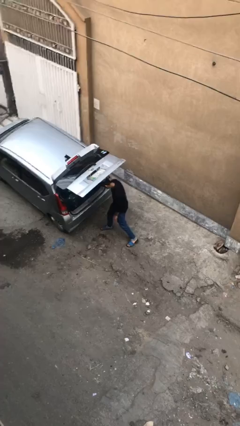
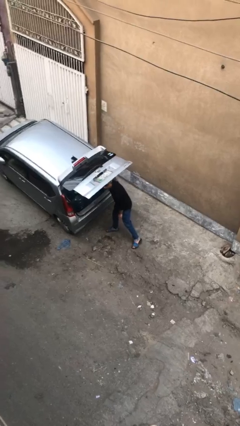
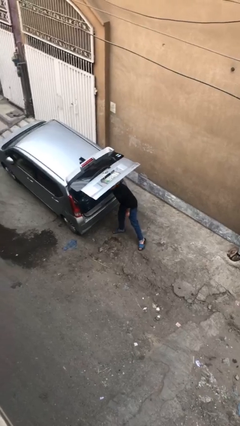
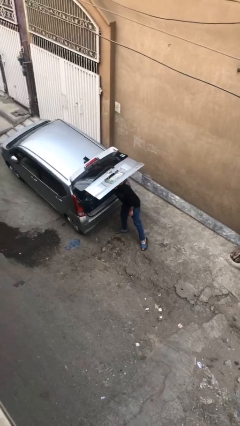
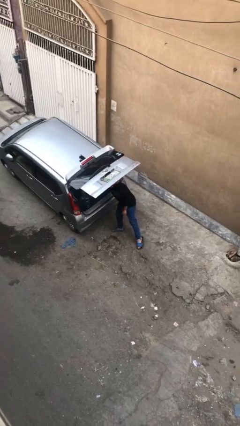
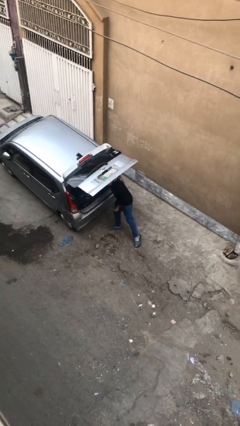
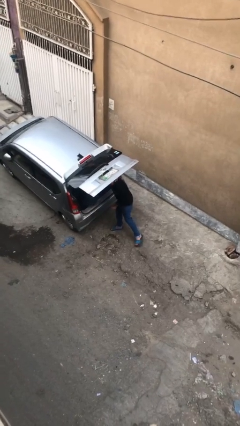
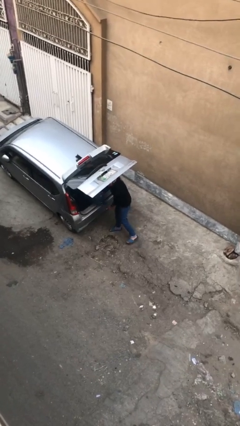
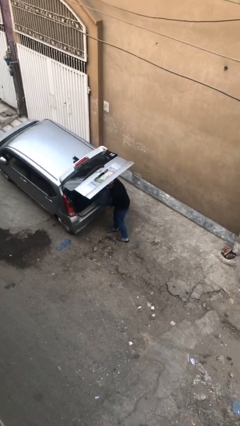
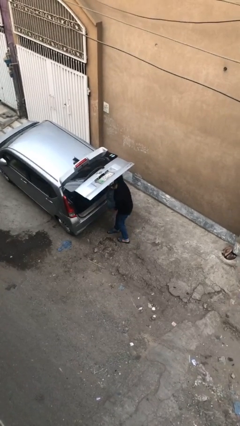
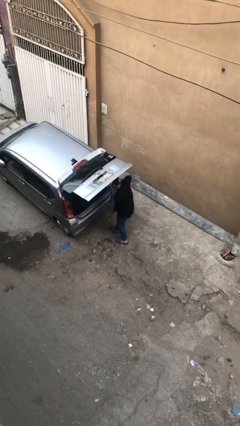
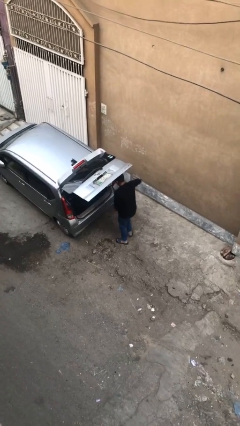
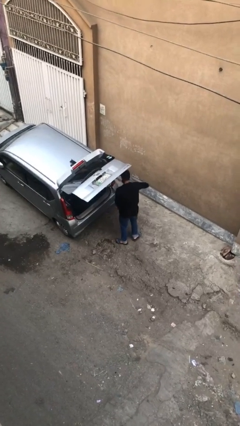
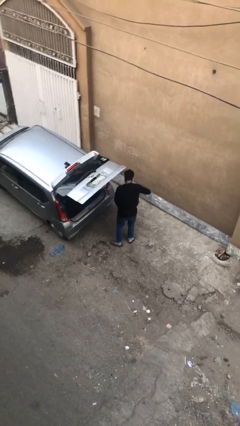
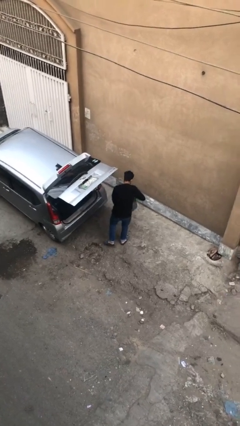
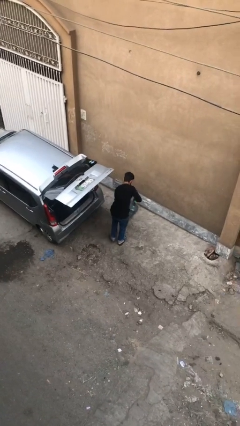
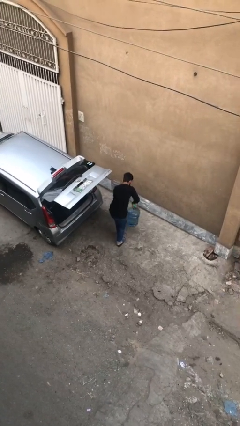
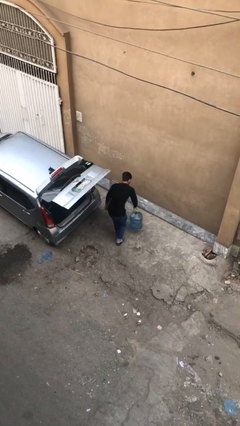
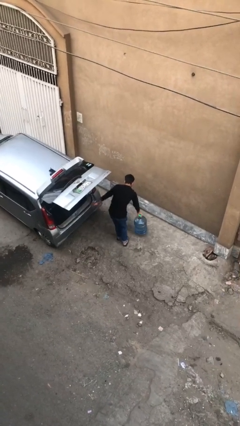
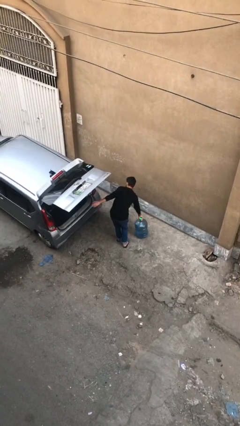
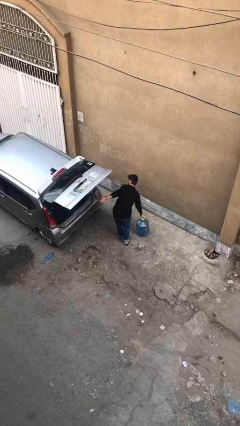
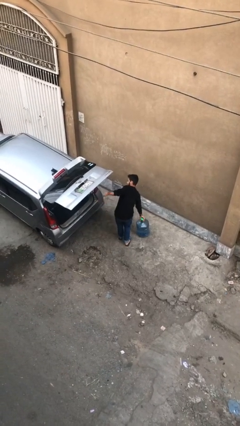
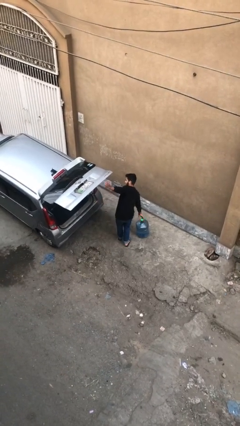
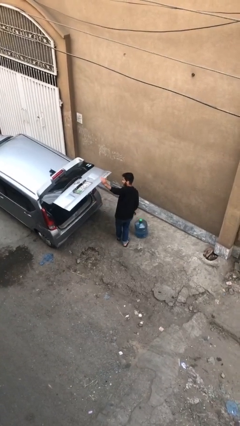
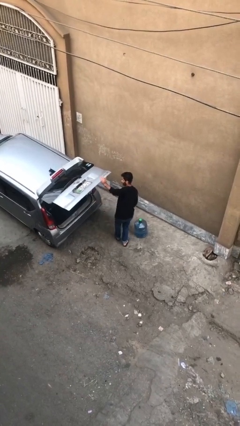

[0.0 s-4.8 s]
person unloads car

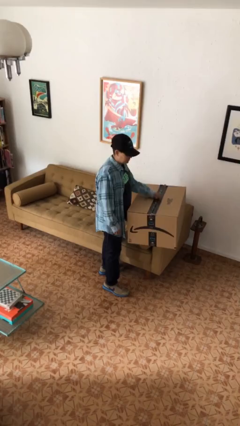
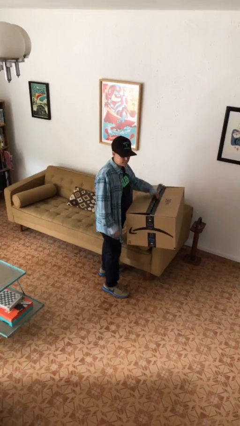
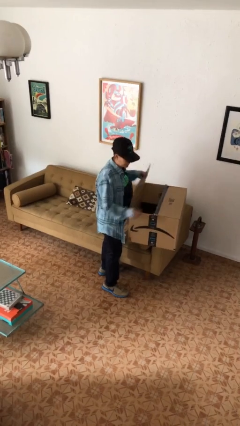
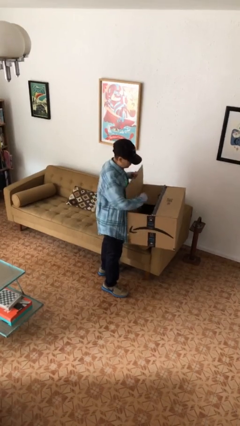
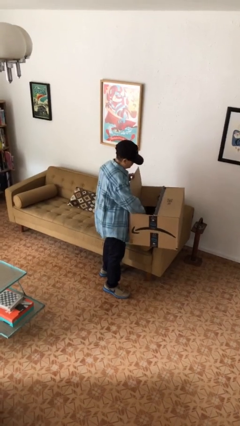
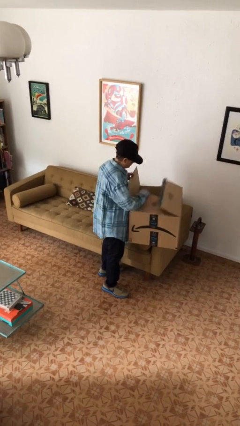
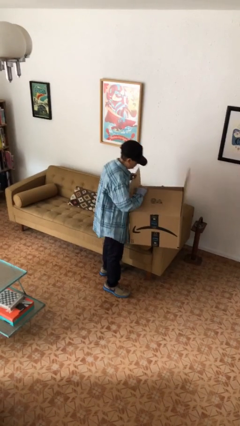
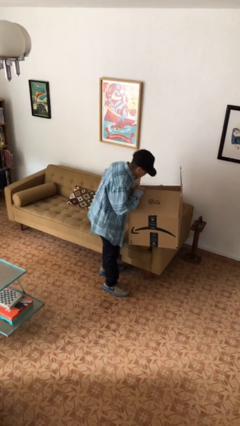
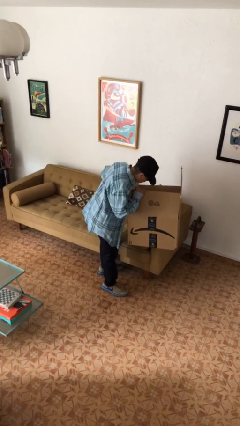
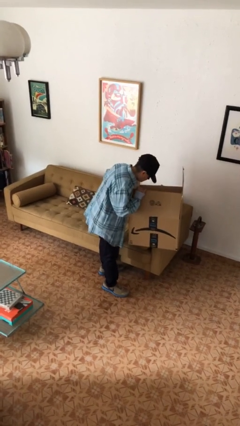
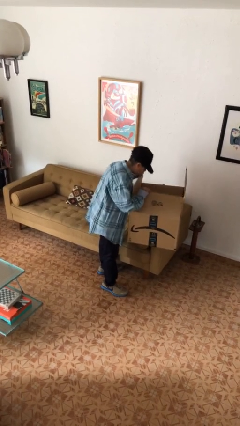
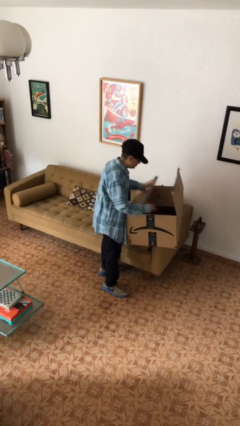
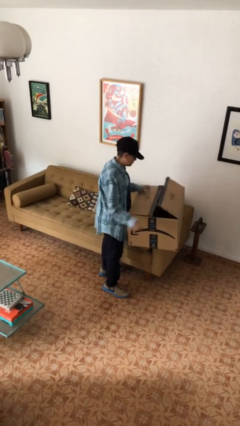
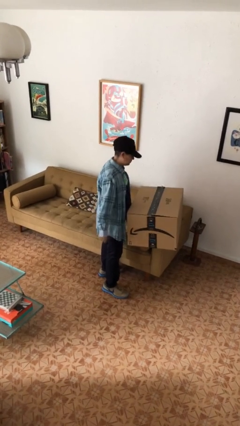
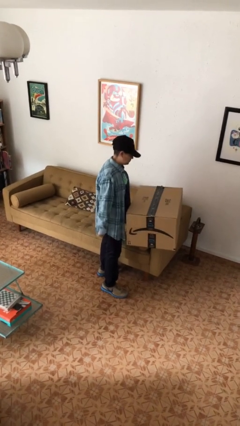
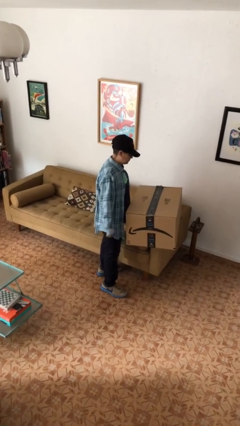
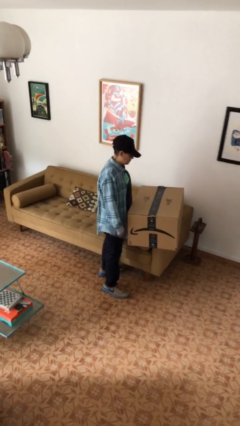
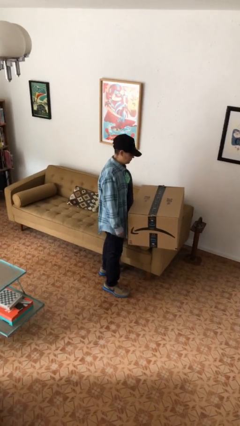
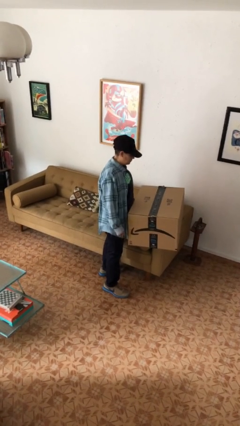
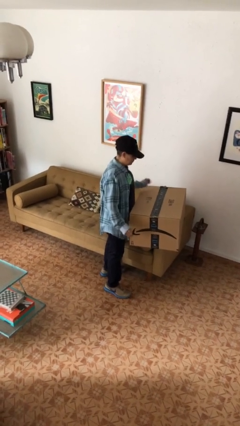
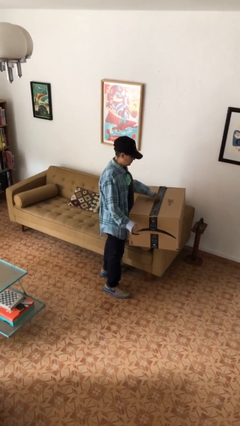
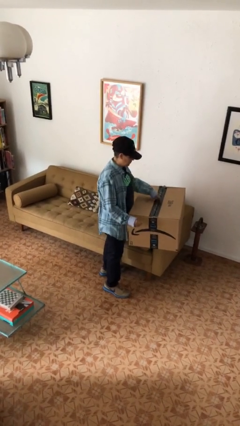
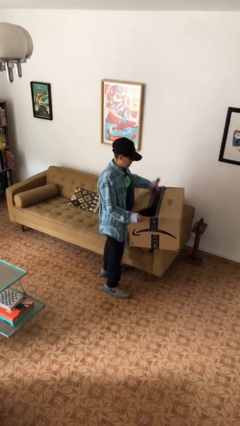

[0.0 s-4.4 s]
person searches in box

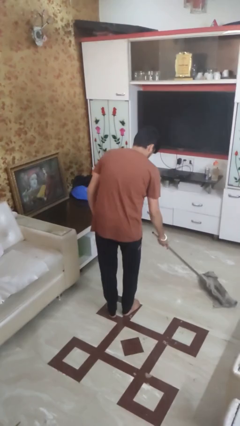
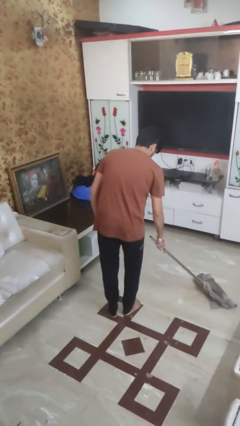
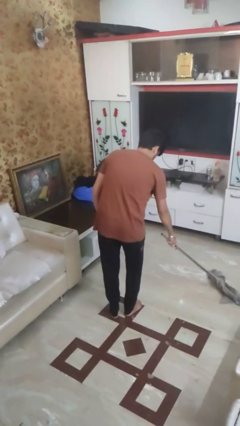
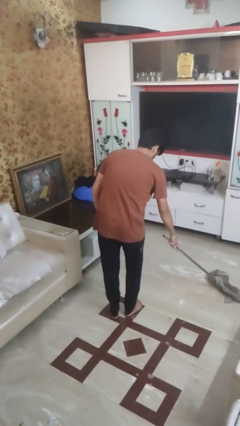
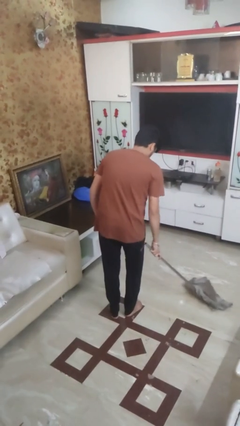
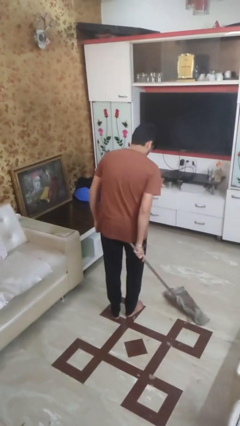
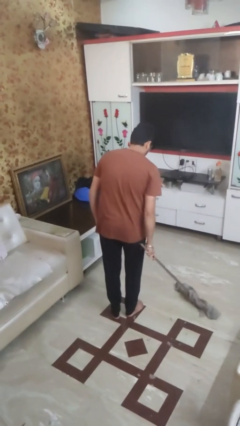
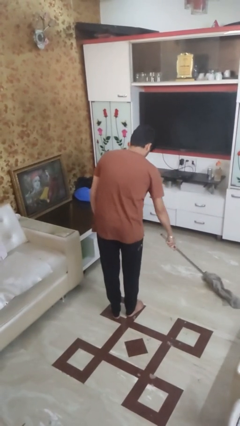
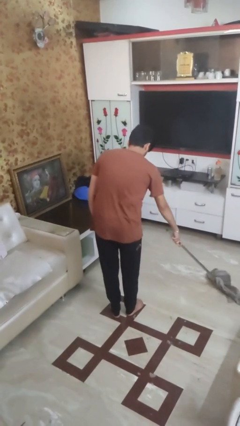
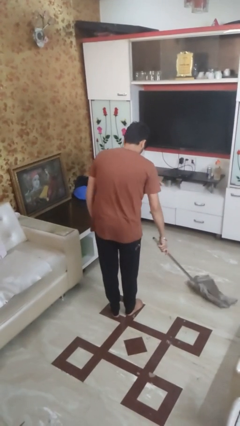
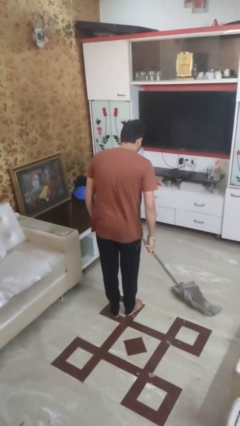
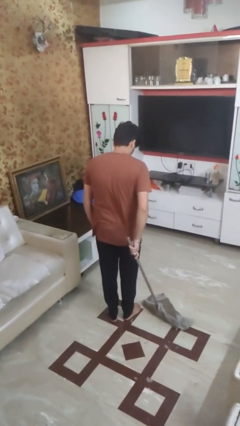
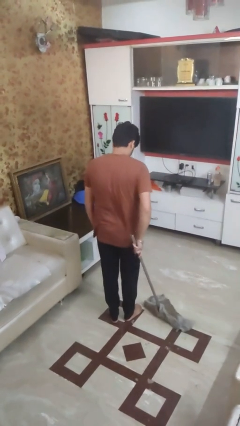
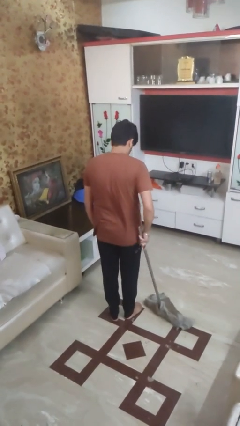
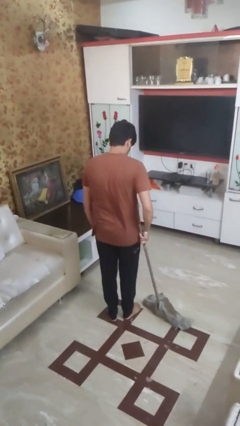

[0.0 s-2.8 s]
person mops

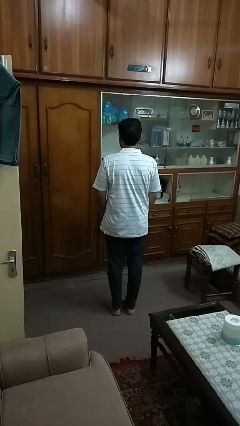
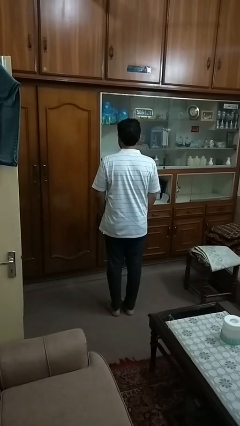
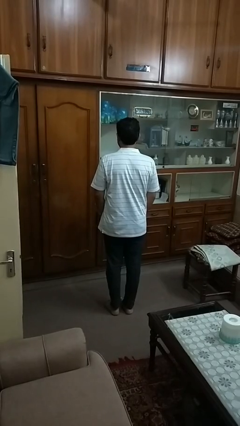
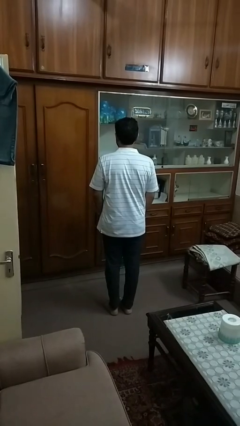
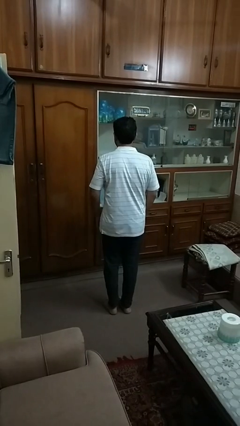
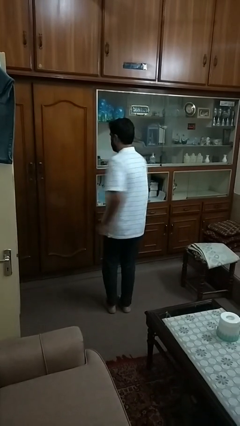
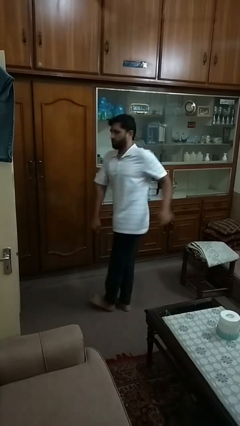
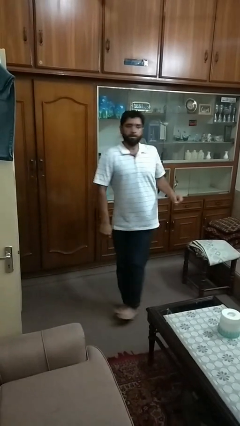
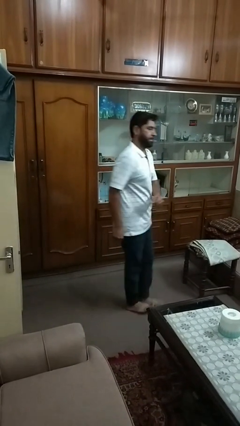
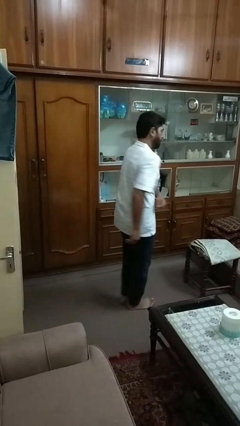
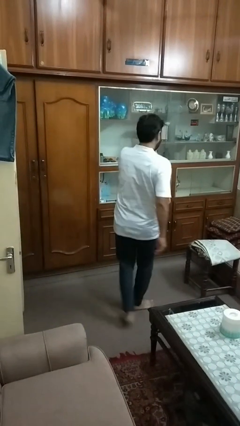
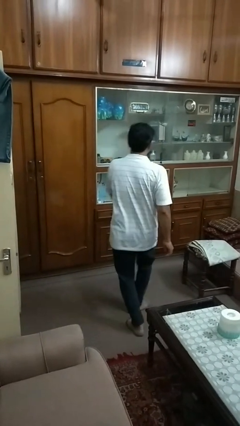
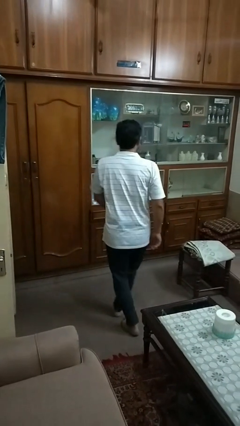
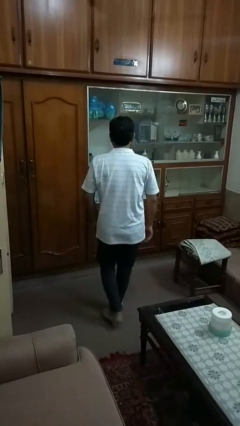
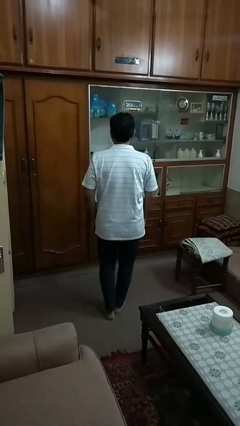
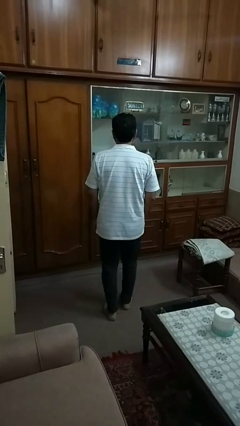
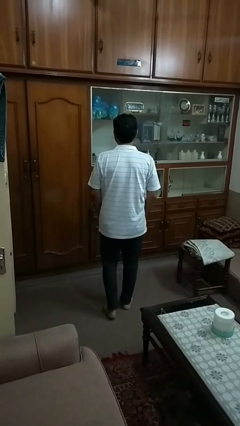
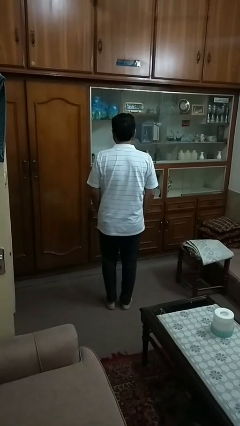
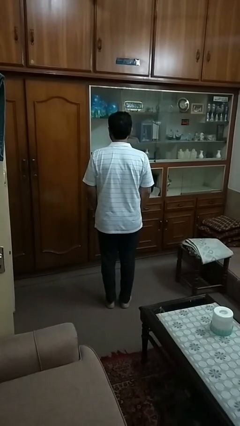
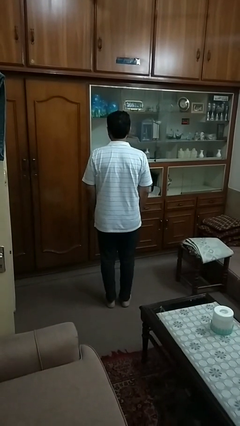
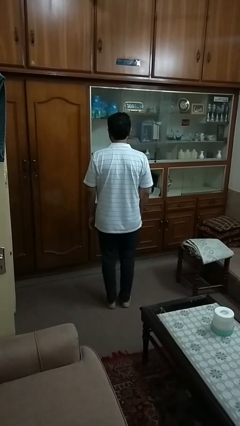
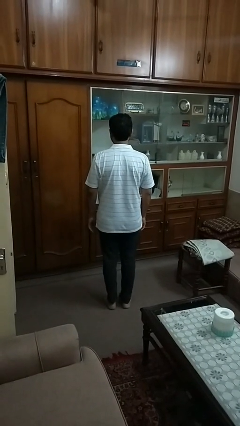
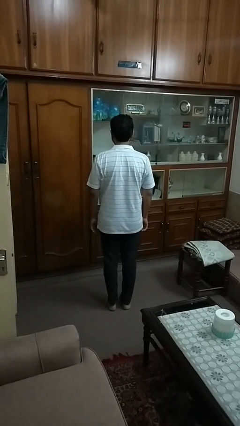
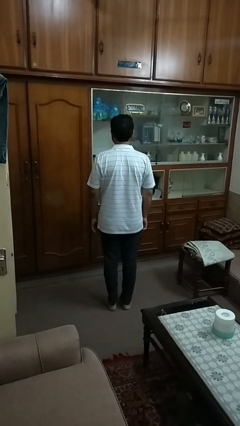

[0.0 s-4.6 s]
person twirls

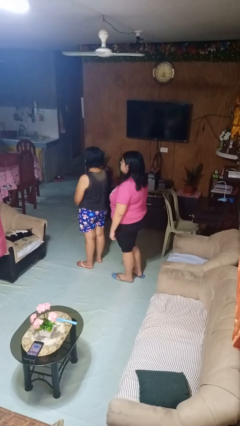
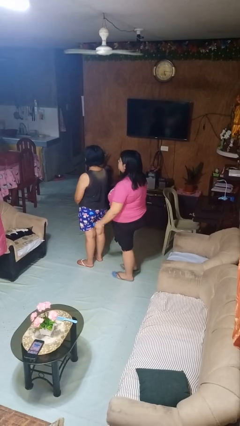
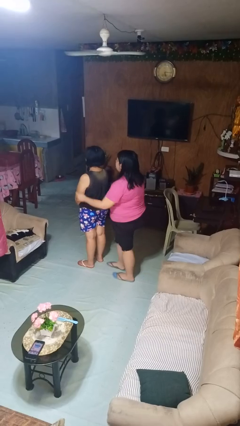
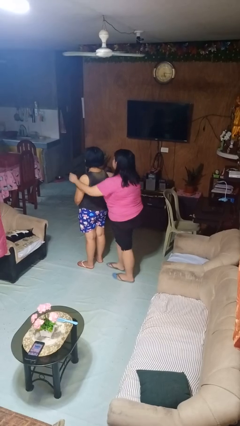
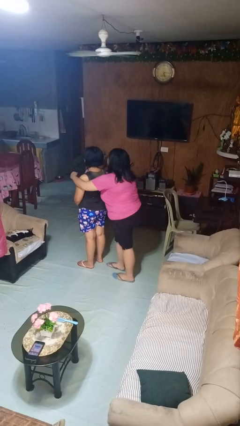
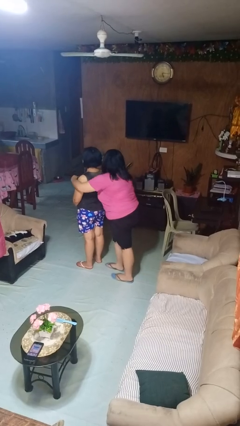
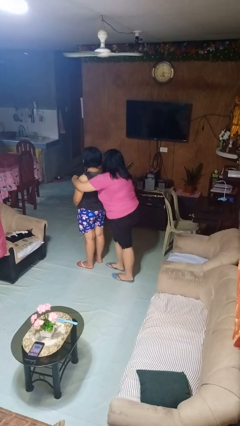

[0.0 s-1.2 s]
person hugs person from behind
